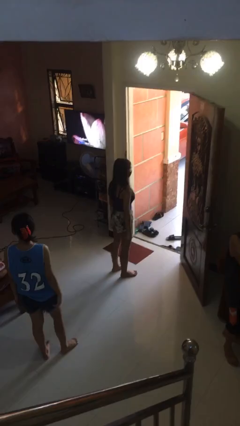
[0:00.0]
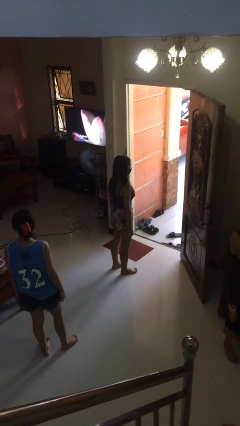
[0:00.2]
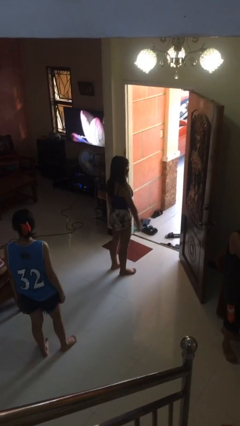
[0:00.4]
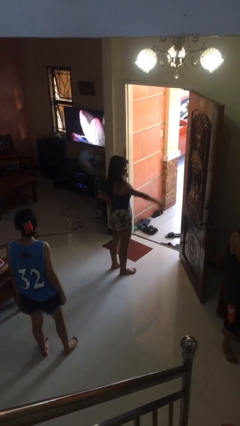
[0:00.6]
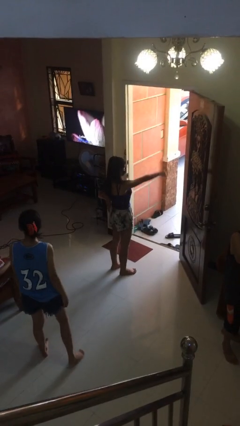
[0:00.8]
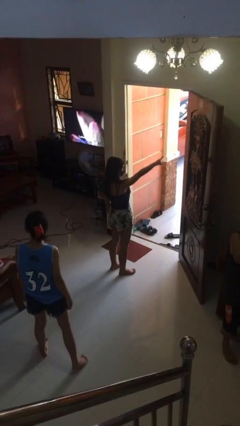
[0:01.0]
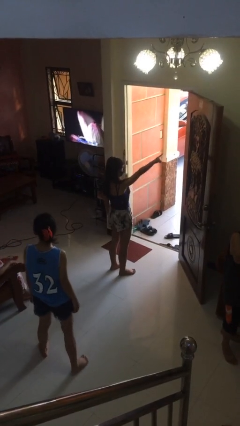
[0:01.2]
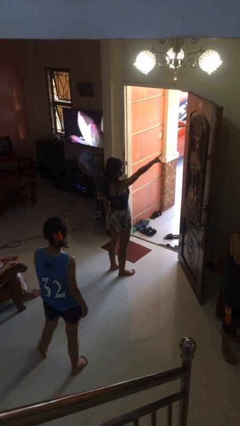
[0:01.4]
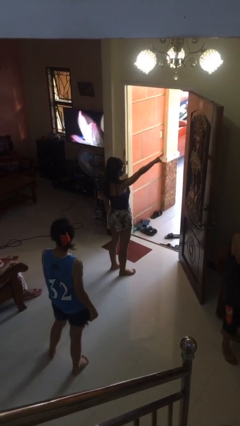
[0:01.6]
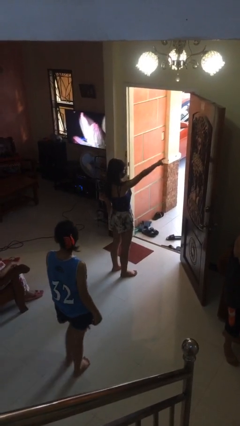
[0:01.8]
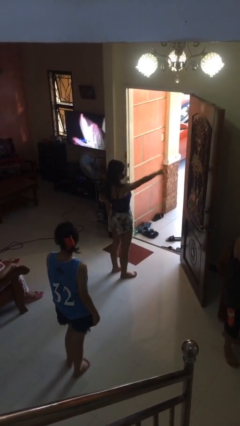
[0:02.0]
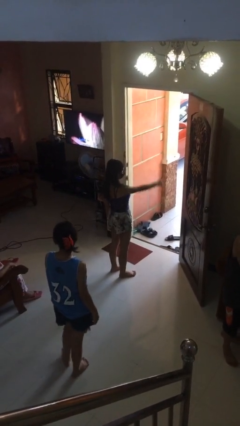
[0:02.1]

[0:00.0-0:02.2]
person points at person

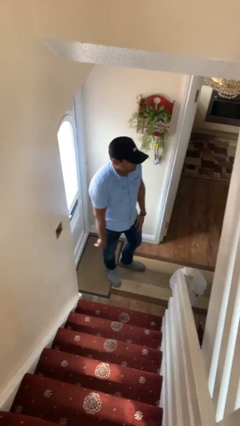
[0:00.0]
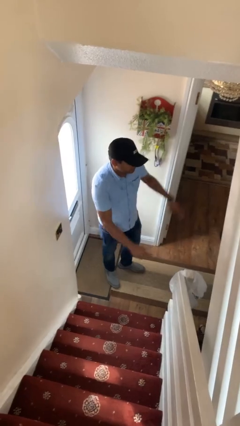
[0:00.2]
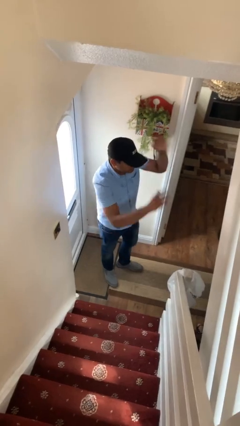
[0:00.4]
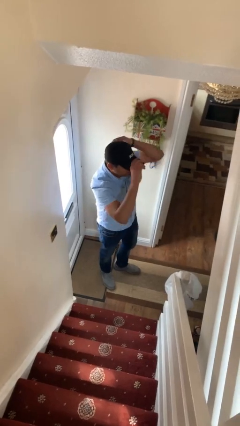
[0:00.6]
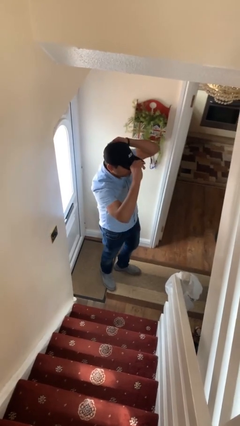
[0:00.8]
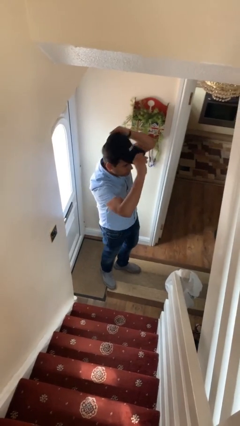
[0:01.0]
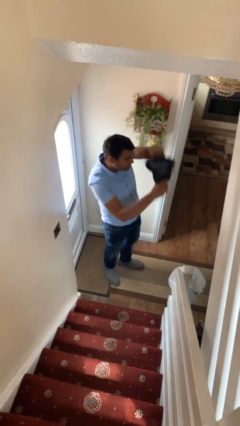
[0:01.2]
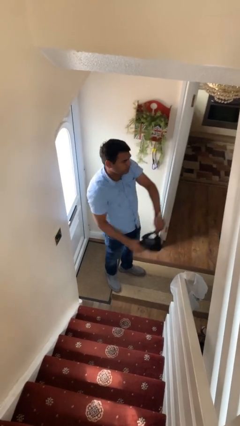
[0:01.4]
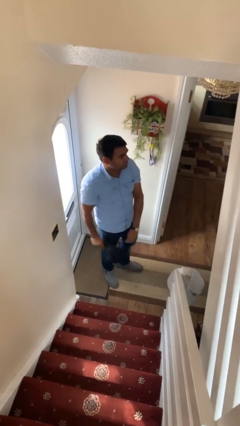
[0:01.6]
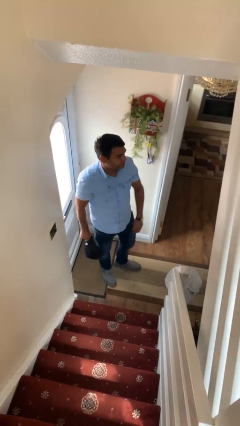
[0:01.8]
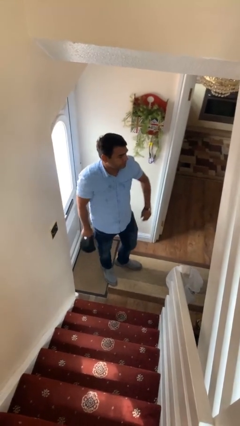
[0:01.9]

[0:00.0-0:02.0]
person takes off hat

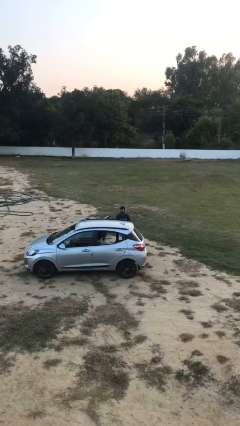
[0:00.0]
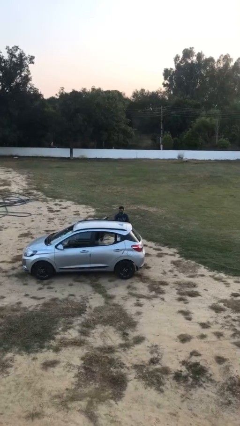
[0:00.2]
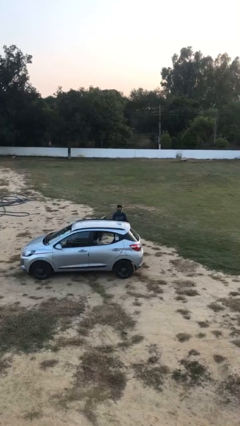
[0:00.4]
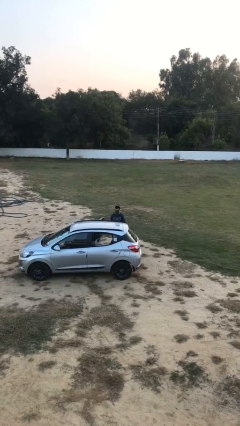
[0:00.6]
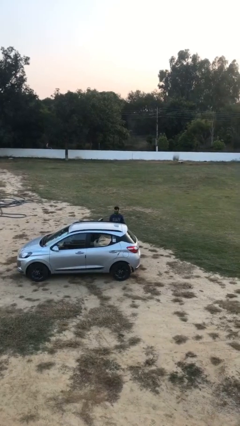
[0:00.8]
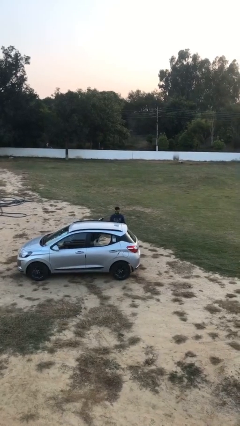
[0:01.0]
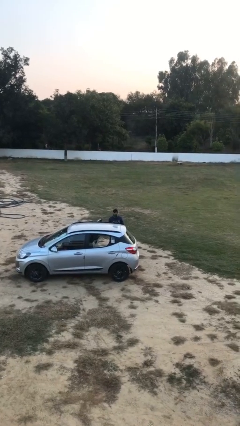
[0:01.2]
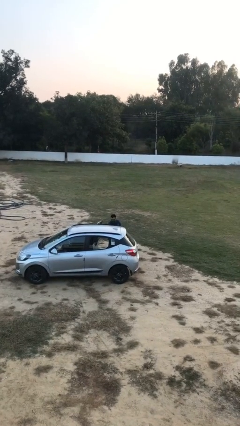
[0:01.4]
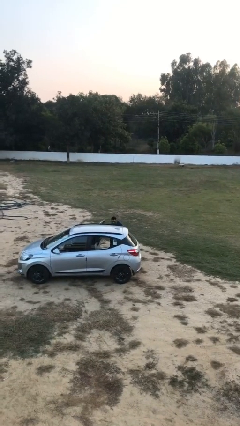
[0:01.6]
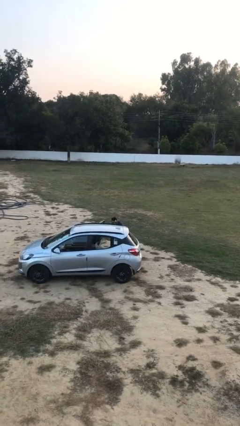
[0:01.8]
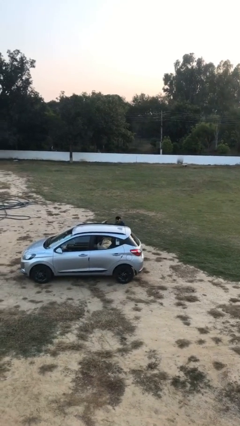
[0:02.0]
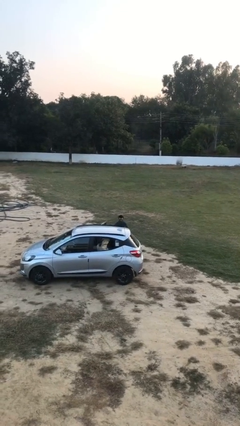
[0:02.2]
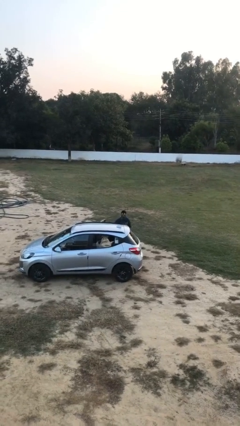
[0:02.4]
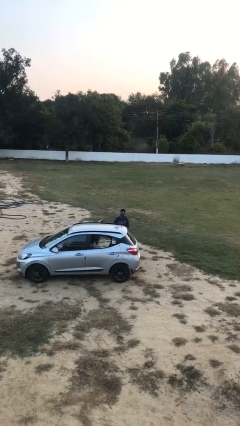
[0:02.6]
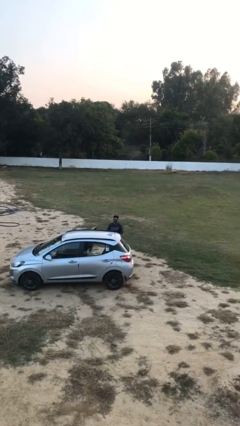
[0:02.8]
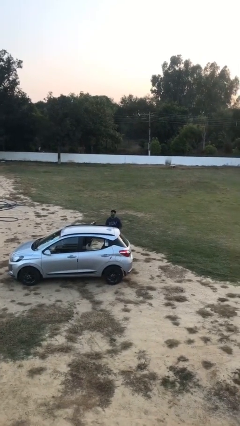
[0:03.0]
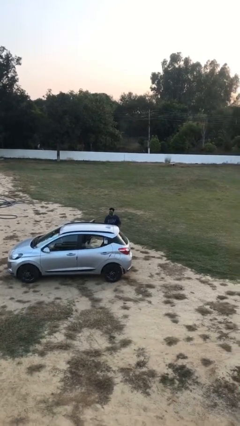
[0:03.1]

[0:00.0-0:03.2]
person unloads car

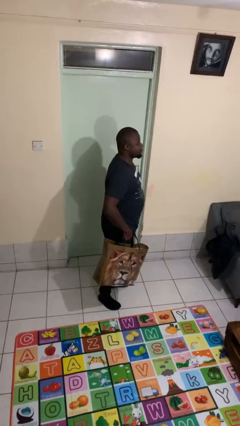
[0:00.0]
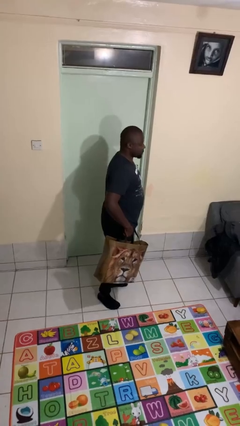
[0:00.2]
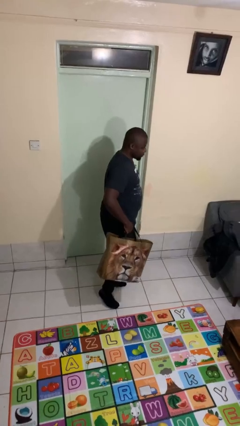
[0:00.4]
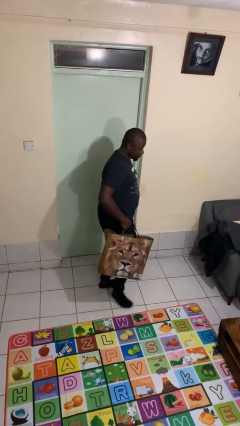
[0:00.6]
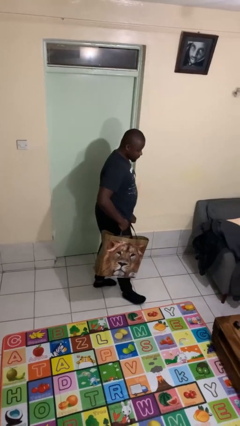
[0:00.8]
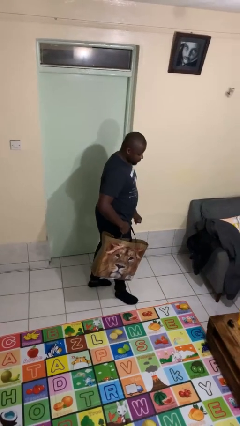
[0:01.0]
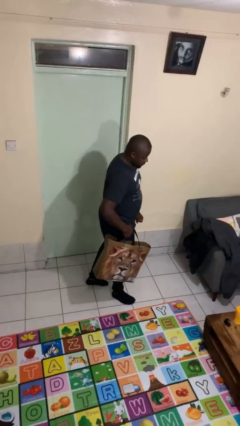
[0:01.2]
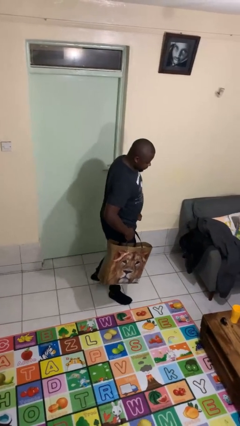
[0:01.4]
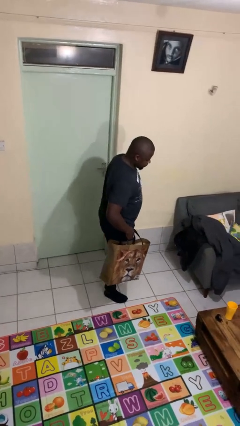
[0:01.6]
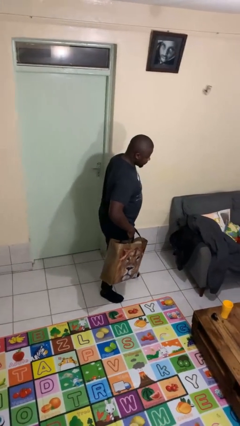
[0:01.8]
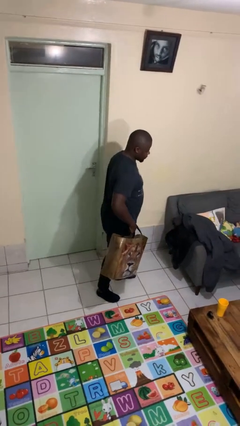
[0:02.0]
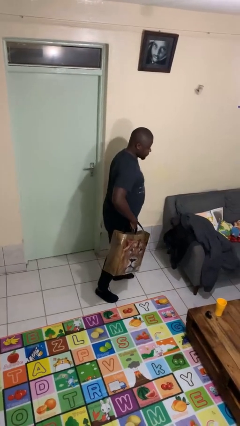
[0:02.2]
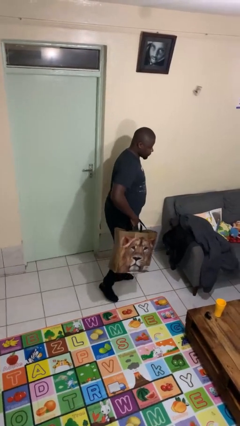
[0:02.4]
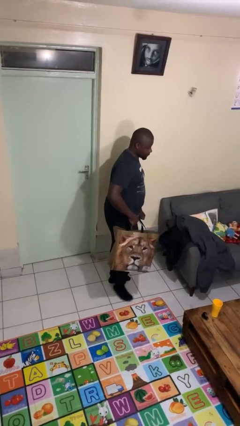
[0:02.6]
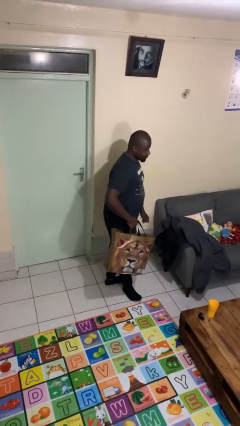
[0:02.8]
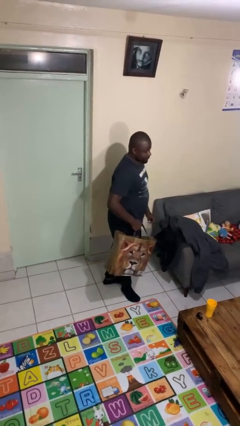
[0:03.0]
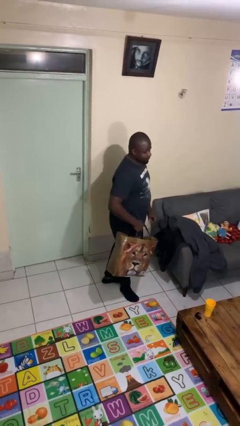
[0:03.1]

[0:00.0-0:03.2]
person carries groceries

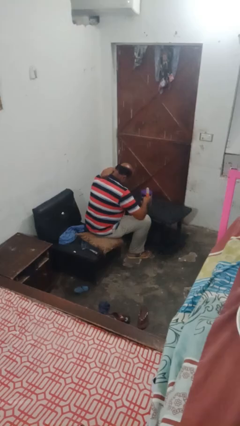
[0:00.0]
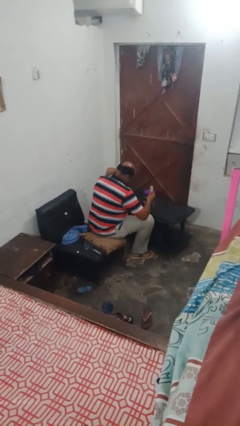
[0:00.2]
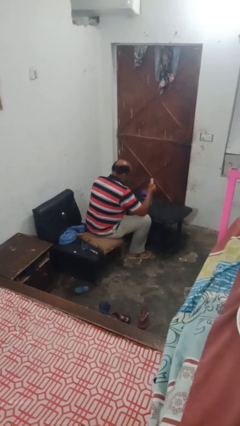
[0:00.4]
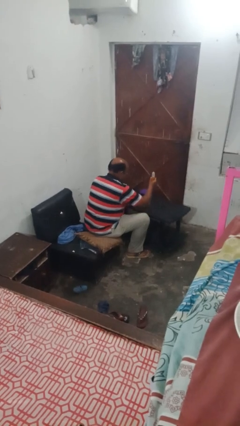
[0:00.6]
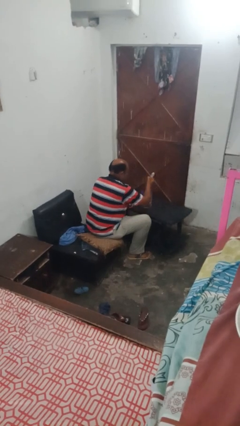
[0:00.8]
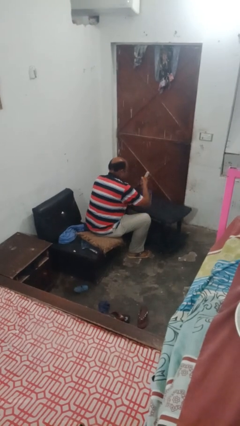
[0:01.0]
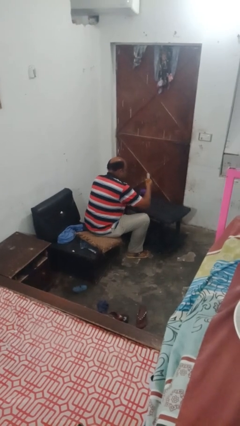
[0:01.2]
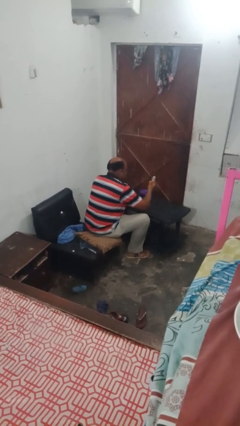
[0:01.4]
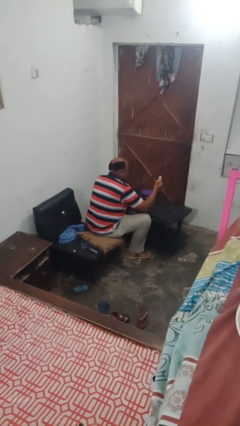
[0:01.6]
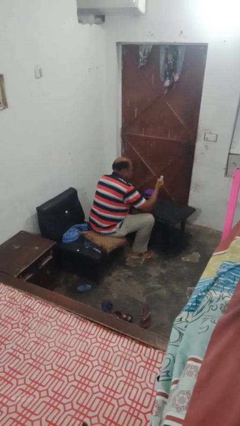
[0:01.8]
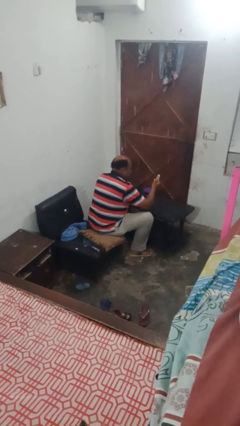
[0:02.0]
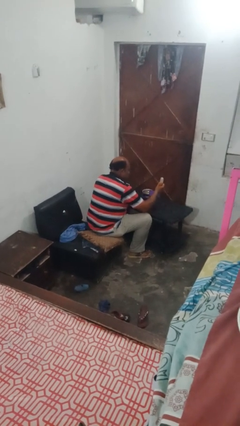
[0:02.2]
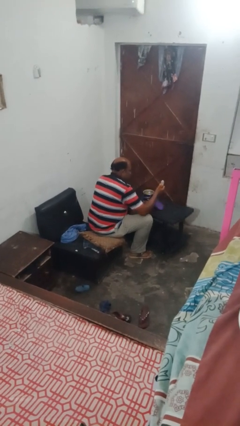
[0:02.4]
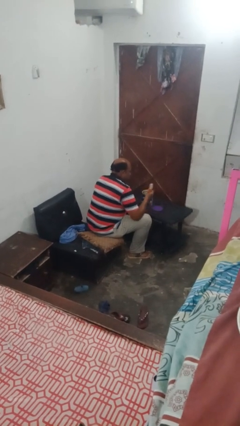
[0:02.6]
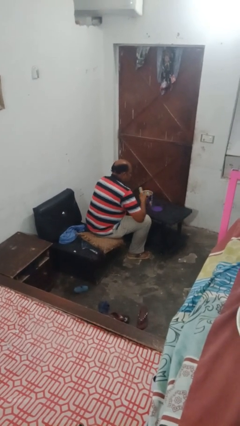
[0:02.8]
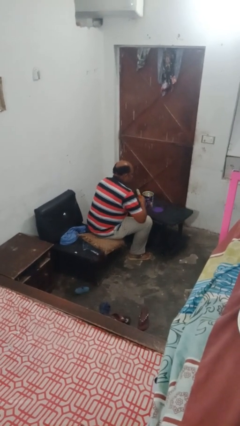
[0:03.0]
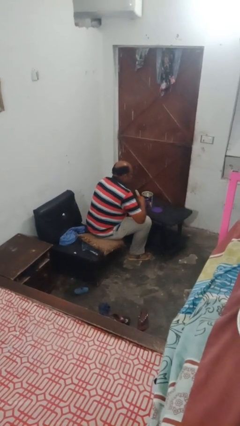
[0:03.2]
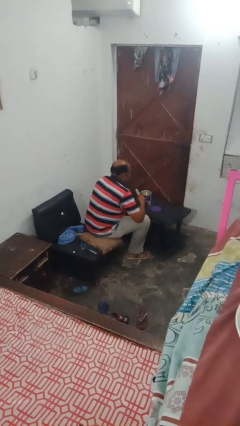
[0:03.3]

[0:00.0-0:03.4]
person opens can with can opener

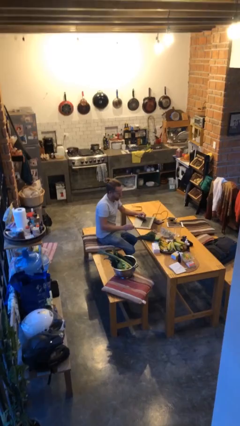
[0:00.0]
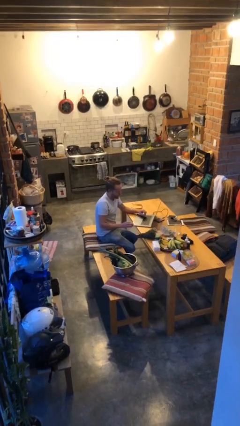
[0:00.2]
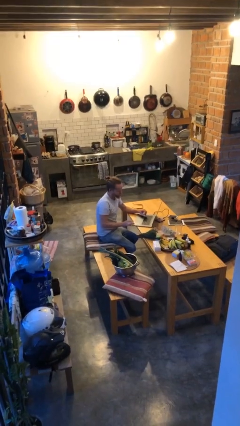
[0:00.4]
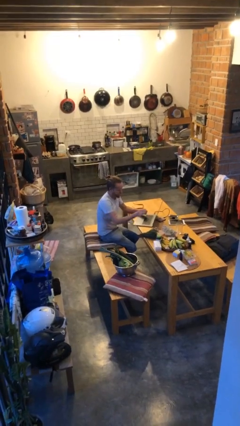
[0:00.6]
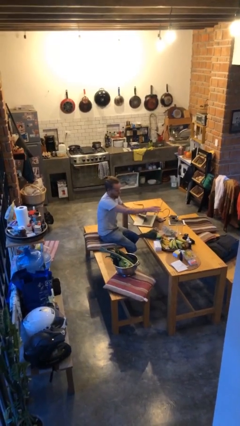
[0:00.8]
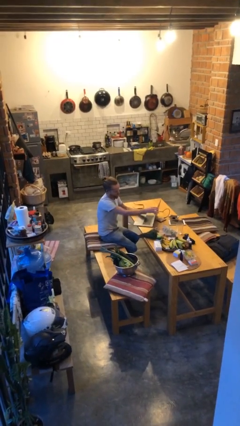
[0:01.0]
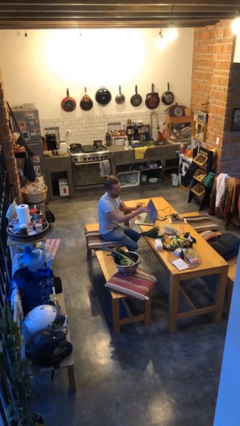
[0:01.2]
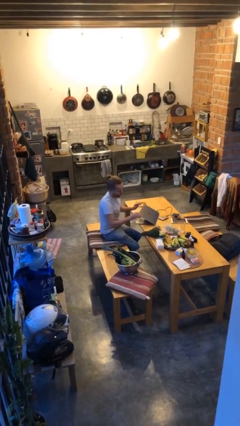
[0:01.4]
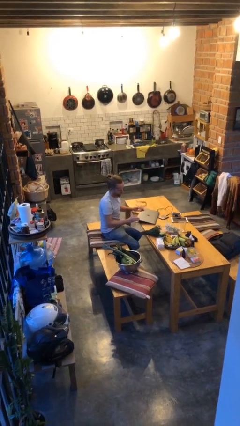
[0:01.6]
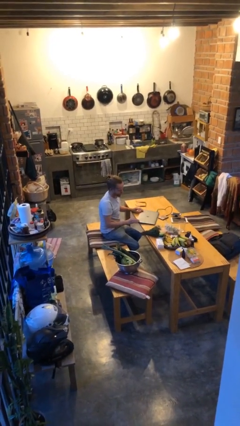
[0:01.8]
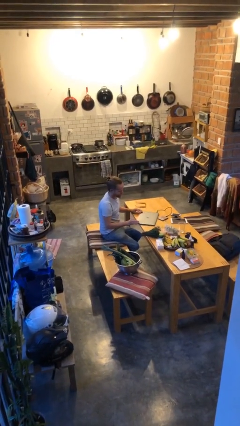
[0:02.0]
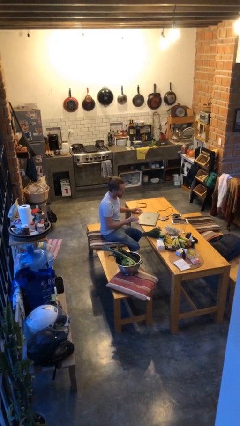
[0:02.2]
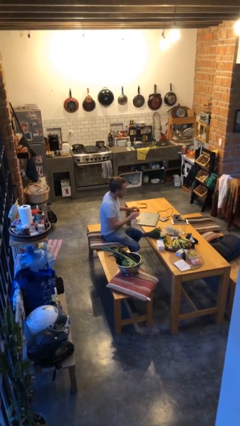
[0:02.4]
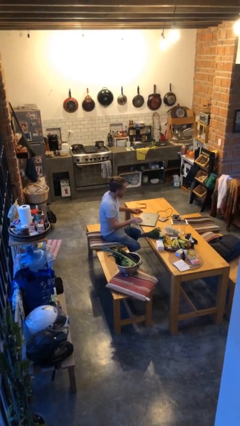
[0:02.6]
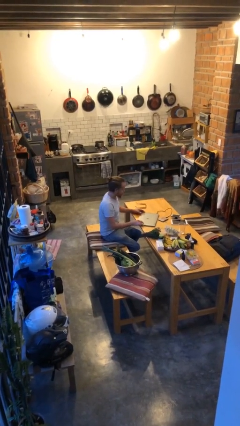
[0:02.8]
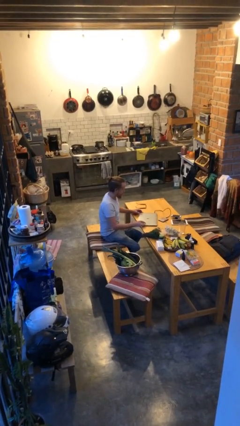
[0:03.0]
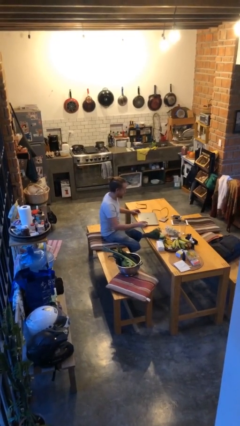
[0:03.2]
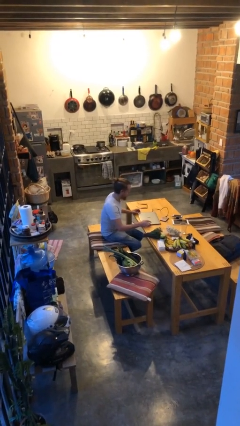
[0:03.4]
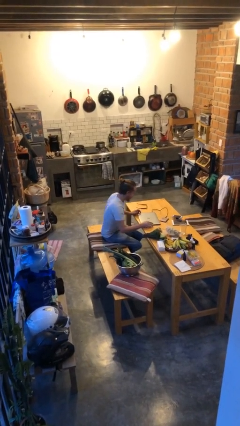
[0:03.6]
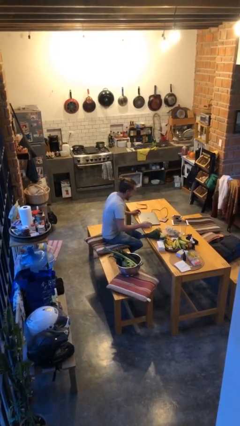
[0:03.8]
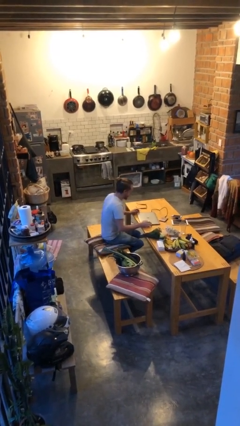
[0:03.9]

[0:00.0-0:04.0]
person closes laptop
